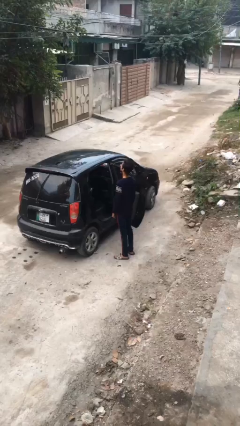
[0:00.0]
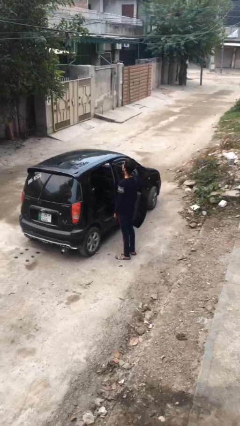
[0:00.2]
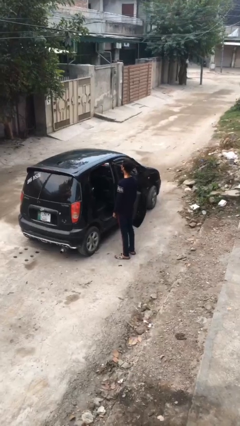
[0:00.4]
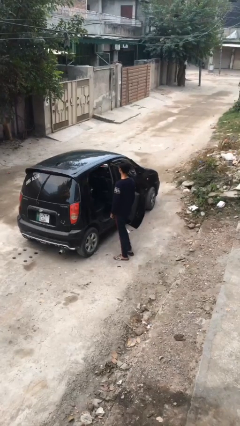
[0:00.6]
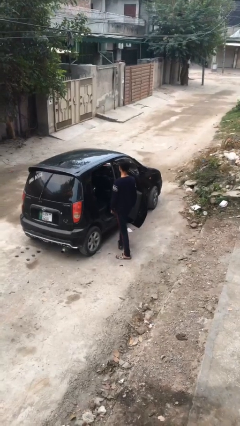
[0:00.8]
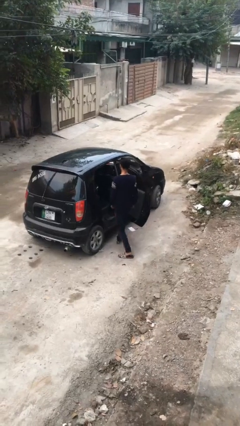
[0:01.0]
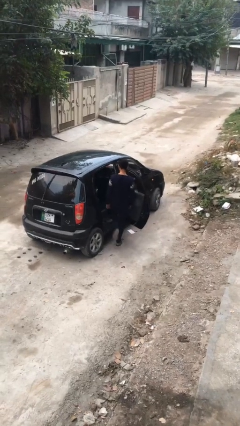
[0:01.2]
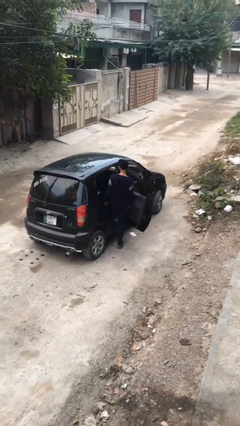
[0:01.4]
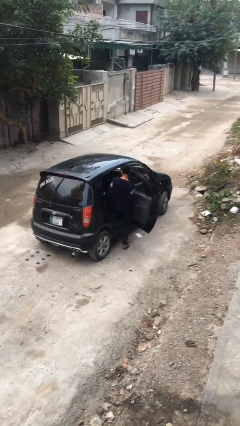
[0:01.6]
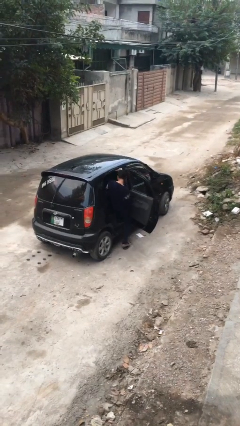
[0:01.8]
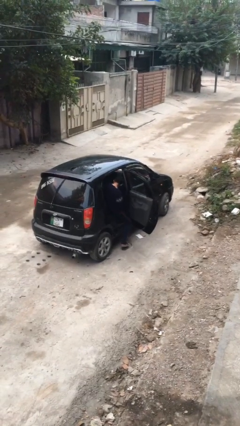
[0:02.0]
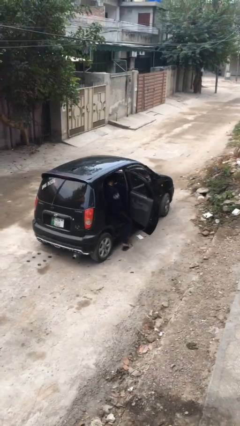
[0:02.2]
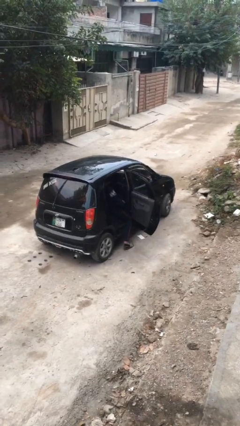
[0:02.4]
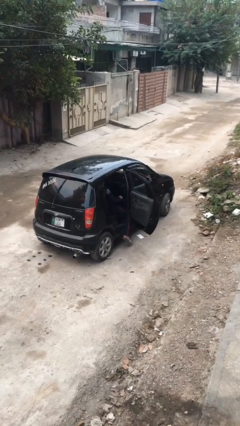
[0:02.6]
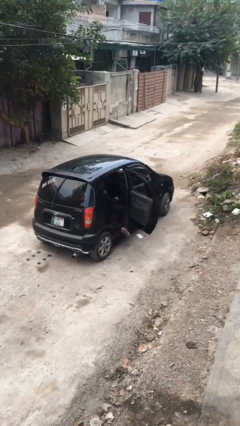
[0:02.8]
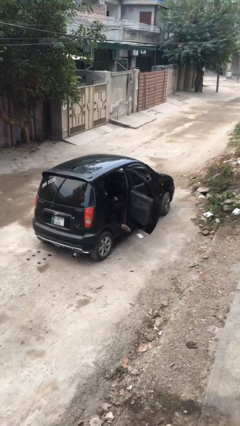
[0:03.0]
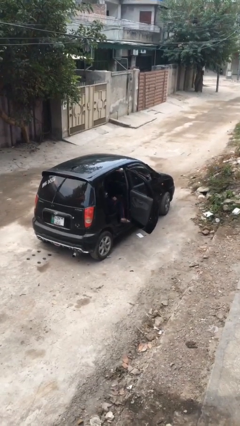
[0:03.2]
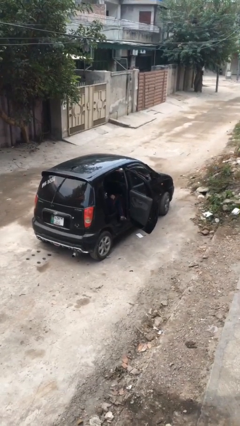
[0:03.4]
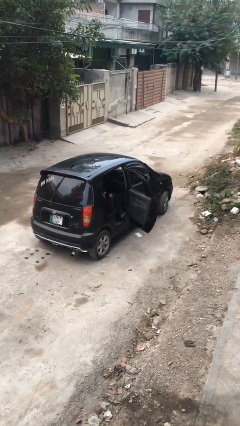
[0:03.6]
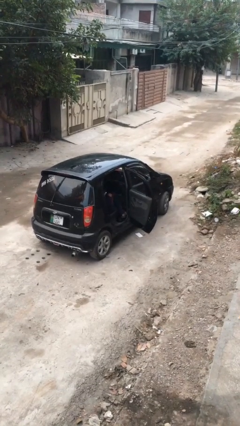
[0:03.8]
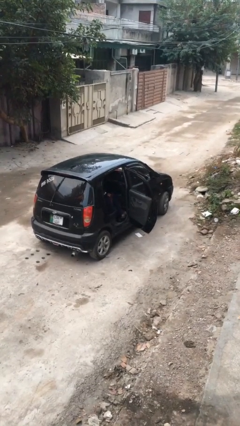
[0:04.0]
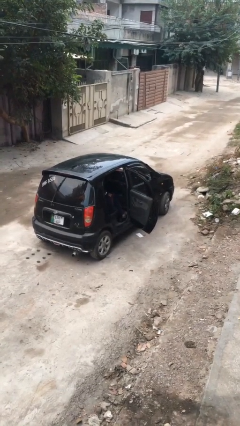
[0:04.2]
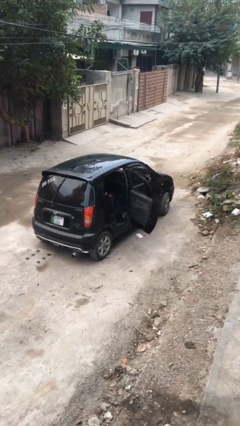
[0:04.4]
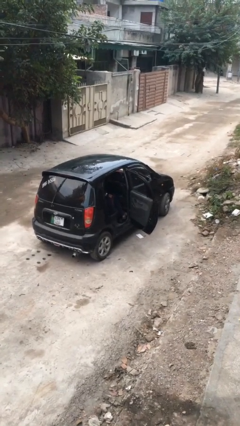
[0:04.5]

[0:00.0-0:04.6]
person enters car

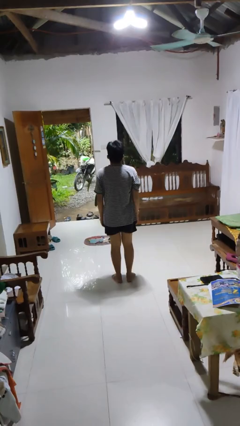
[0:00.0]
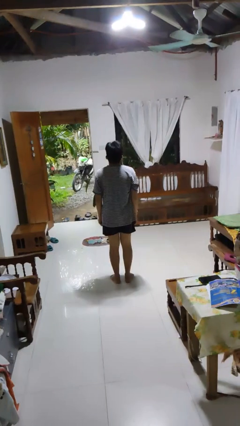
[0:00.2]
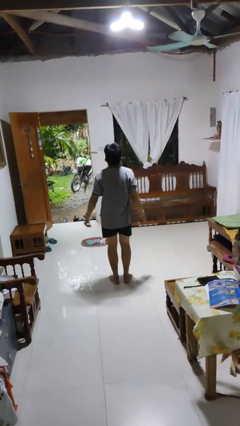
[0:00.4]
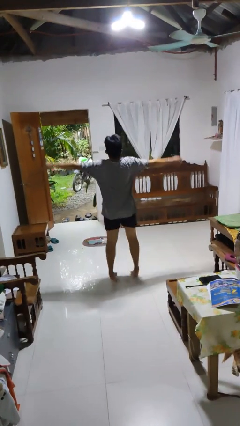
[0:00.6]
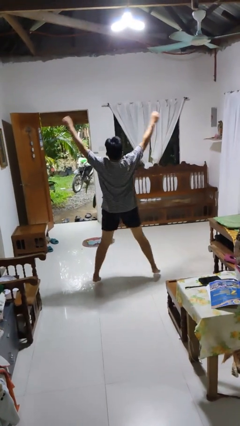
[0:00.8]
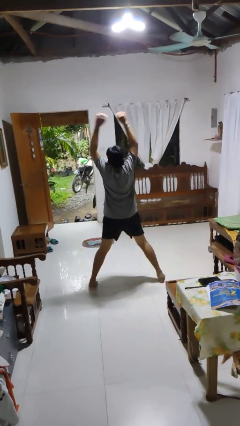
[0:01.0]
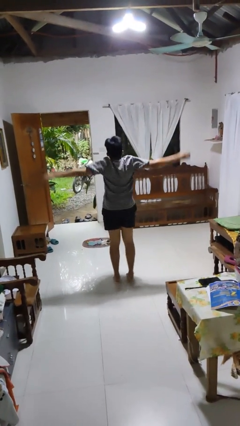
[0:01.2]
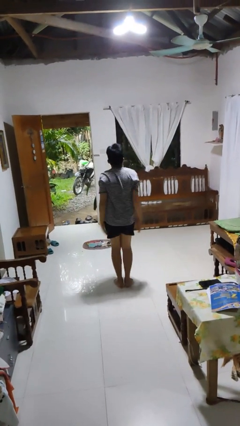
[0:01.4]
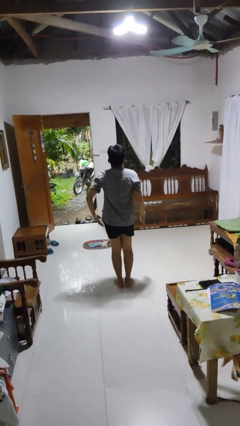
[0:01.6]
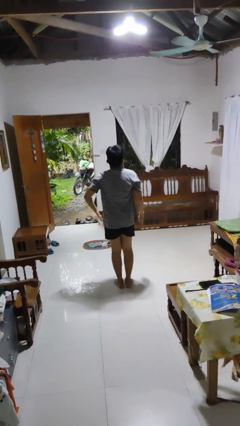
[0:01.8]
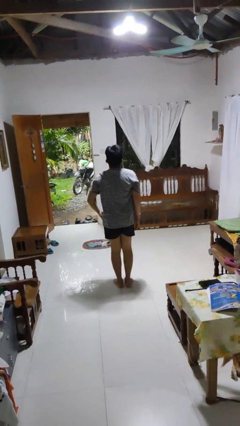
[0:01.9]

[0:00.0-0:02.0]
person exercises with jumping jacks

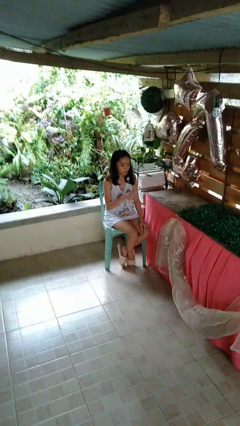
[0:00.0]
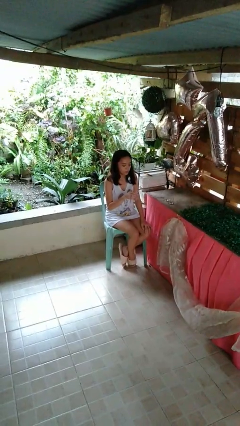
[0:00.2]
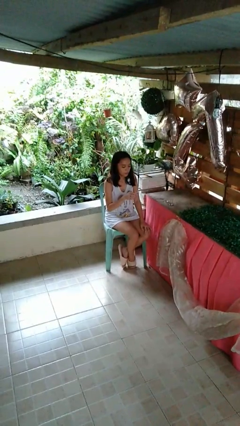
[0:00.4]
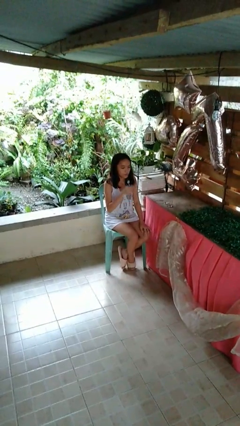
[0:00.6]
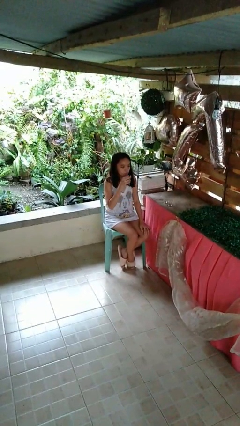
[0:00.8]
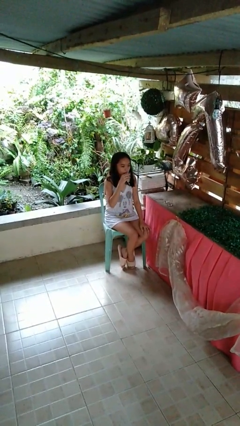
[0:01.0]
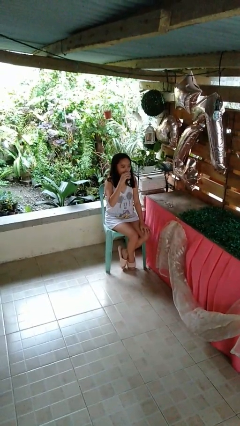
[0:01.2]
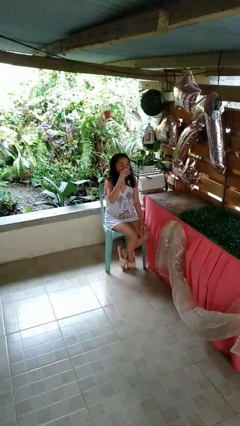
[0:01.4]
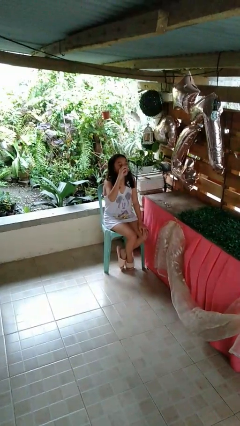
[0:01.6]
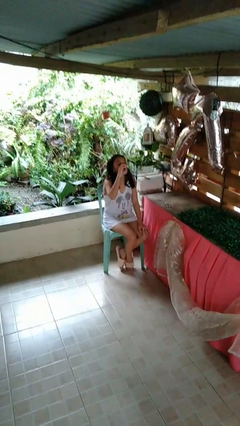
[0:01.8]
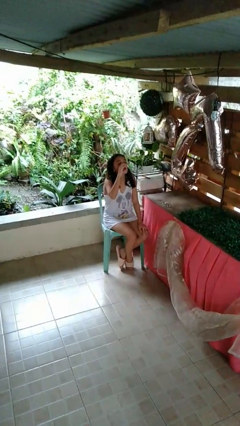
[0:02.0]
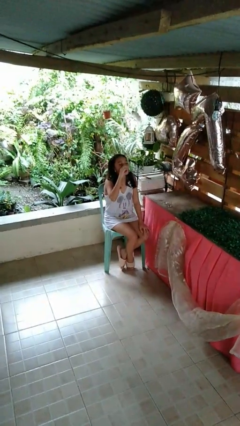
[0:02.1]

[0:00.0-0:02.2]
person drinks from shotglass

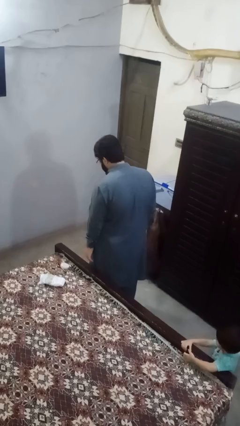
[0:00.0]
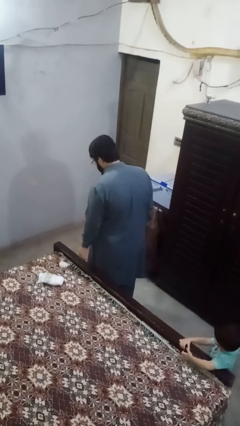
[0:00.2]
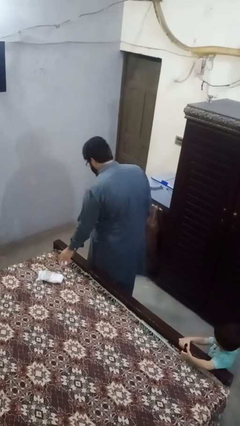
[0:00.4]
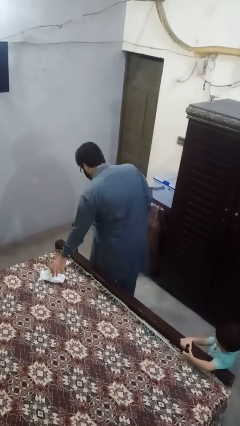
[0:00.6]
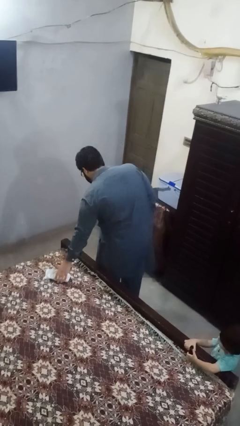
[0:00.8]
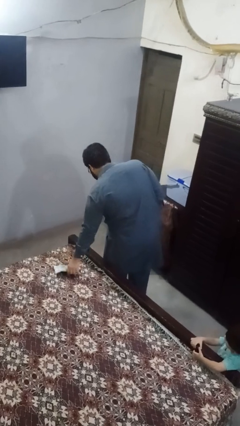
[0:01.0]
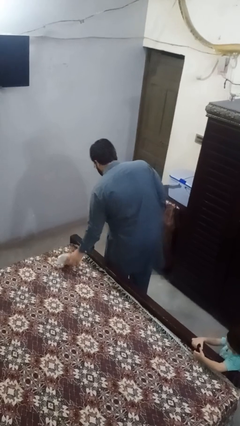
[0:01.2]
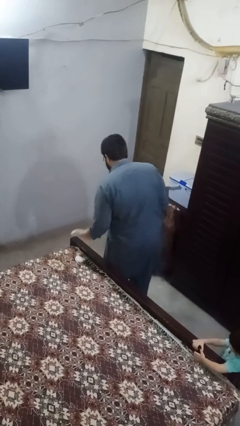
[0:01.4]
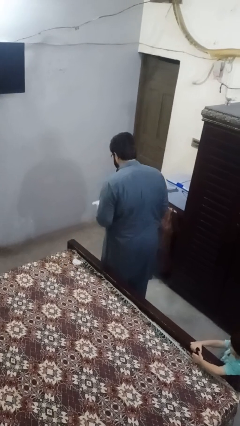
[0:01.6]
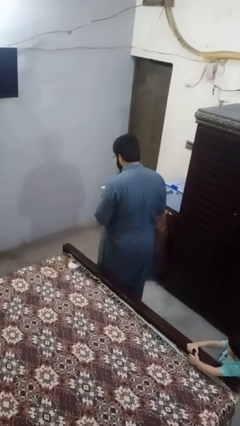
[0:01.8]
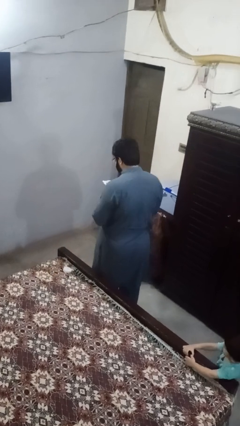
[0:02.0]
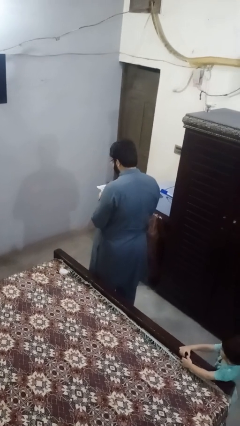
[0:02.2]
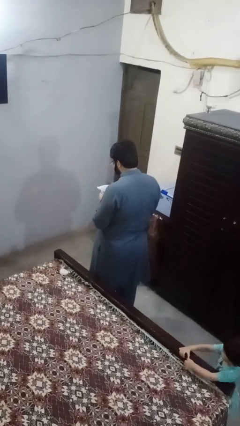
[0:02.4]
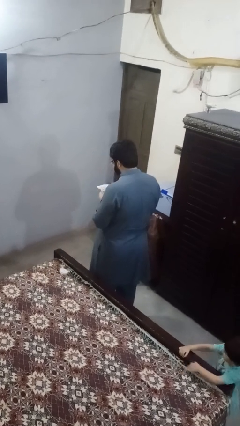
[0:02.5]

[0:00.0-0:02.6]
person picks up object from bed

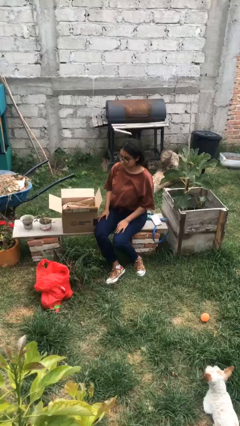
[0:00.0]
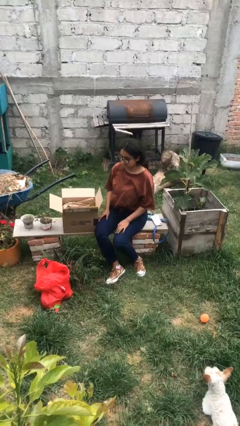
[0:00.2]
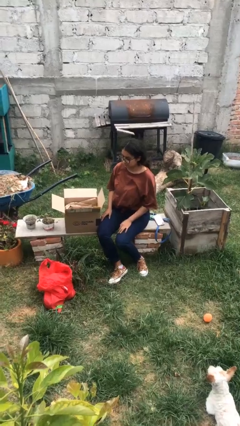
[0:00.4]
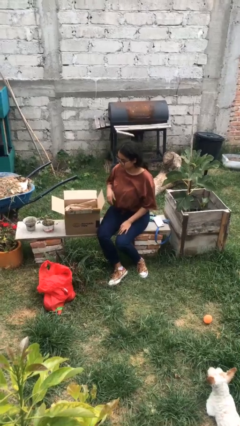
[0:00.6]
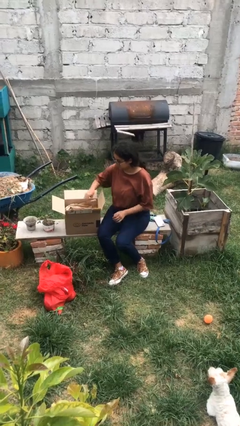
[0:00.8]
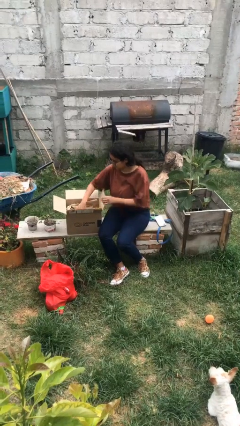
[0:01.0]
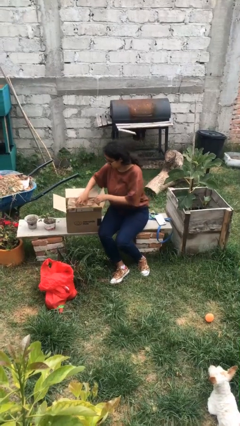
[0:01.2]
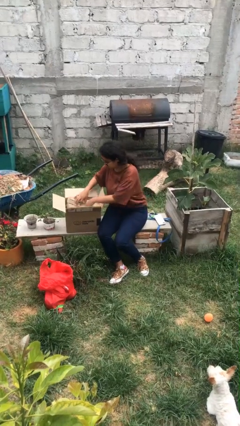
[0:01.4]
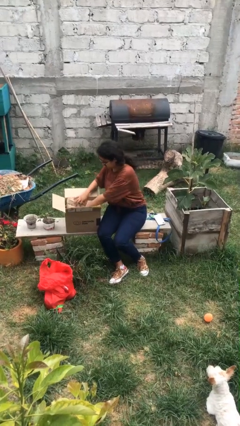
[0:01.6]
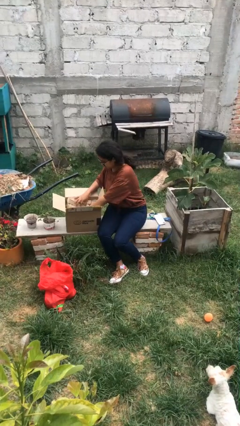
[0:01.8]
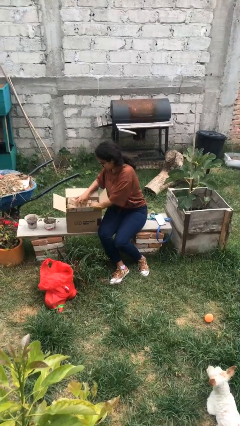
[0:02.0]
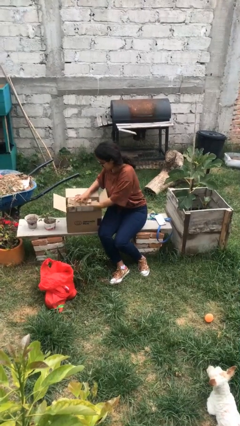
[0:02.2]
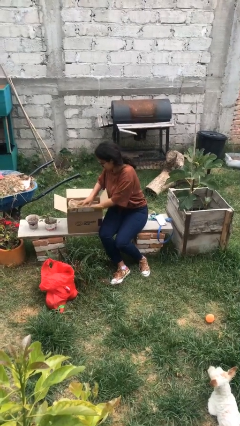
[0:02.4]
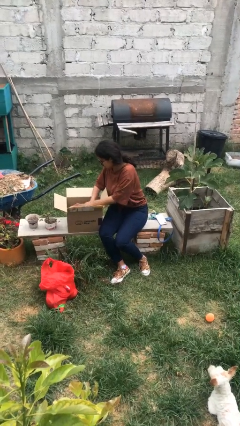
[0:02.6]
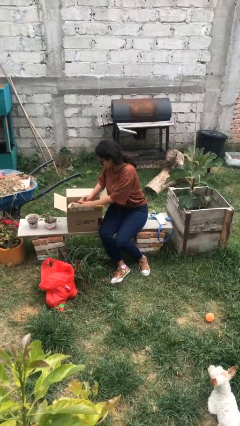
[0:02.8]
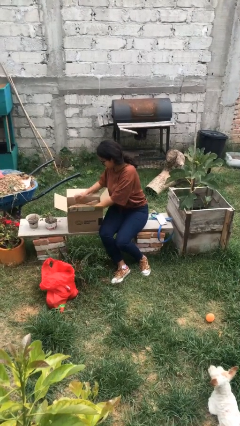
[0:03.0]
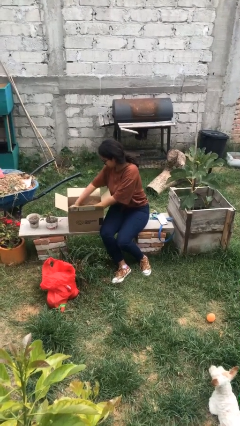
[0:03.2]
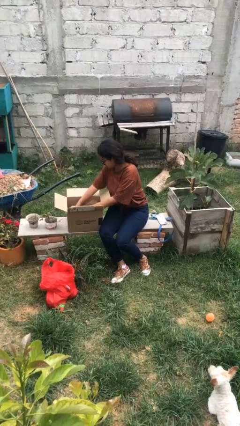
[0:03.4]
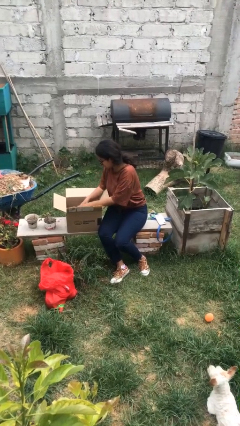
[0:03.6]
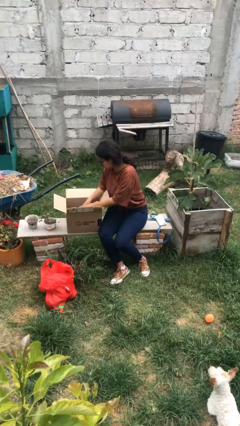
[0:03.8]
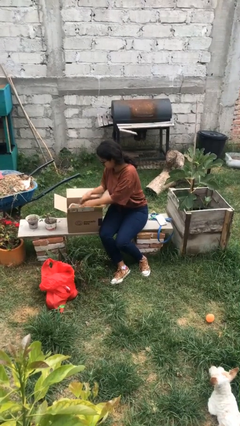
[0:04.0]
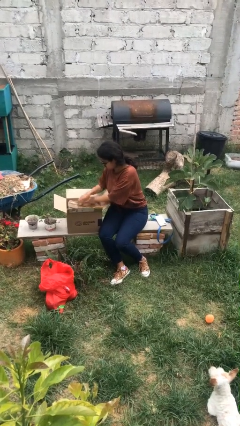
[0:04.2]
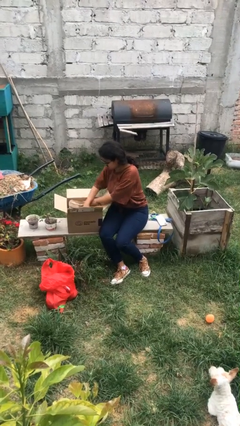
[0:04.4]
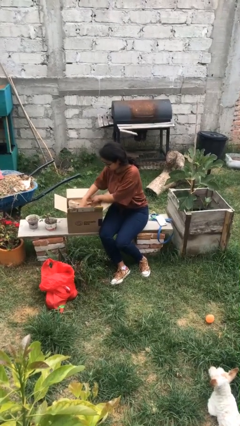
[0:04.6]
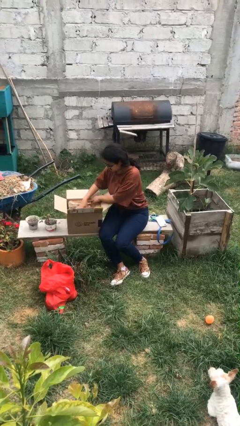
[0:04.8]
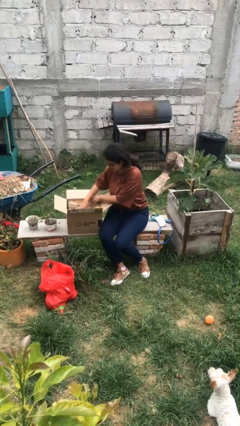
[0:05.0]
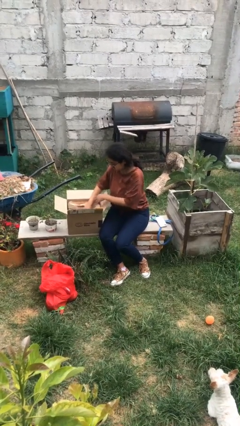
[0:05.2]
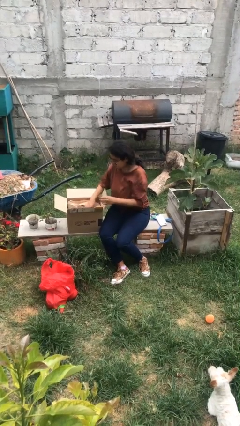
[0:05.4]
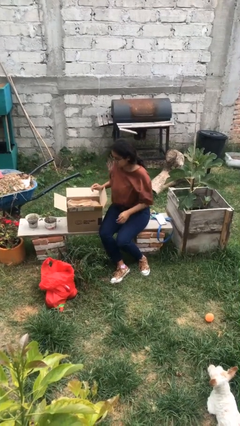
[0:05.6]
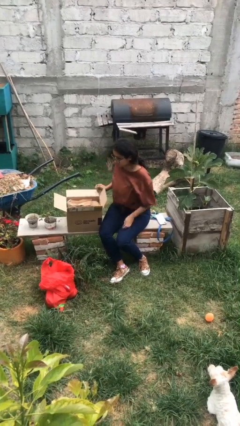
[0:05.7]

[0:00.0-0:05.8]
person searches in box

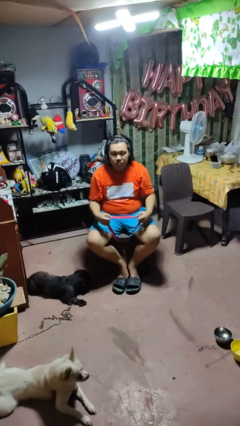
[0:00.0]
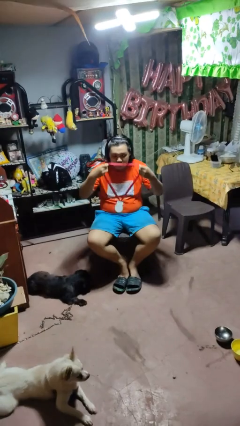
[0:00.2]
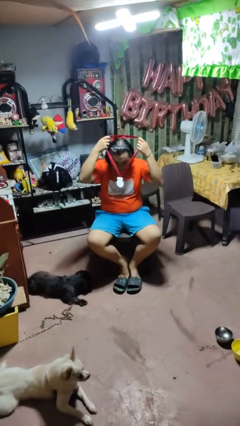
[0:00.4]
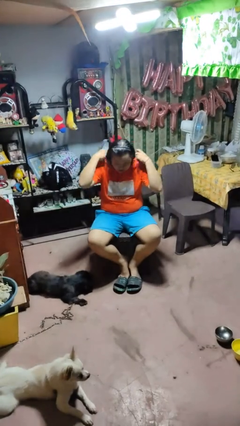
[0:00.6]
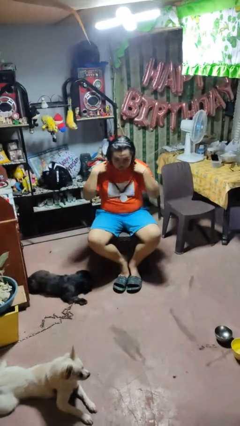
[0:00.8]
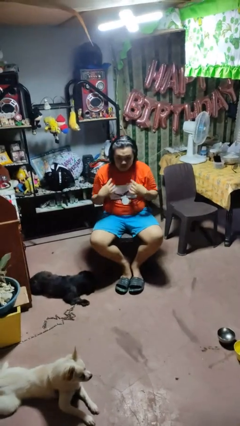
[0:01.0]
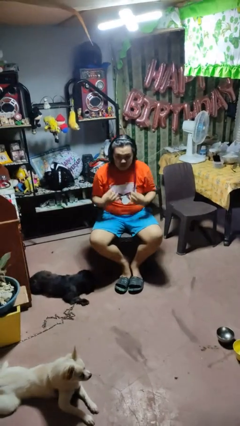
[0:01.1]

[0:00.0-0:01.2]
person puts on necklace
